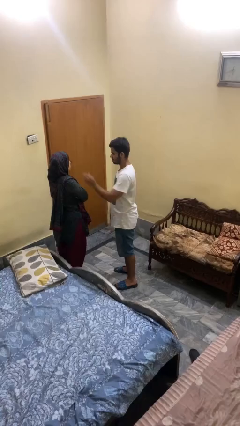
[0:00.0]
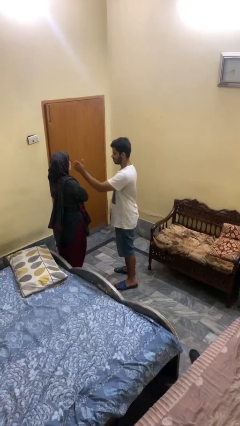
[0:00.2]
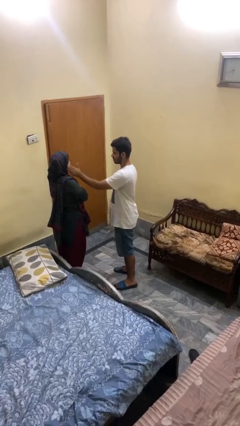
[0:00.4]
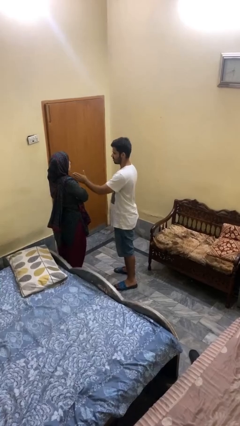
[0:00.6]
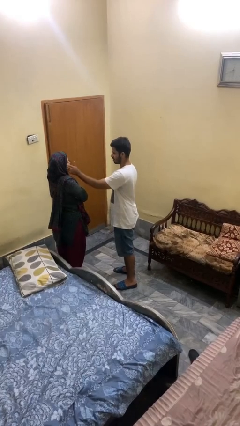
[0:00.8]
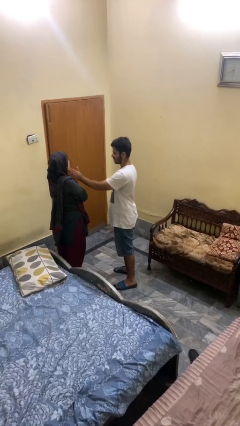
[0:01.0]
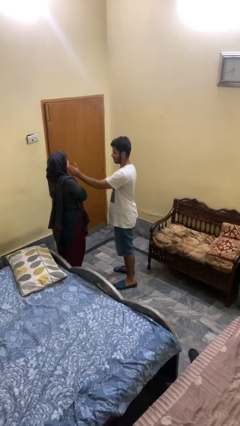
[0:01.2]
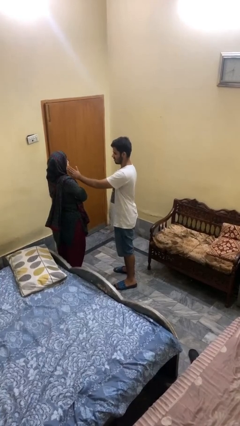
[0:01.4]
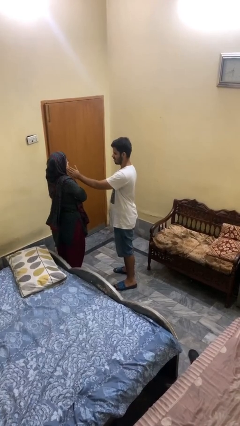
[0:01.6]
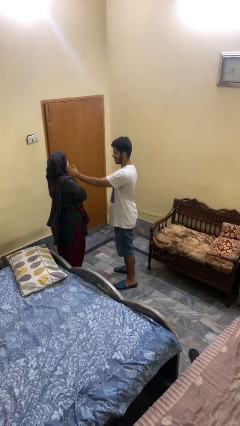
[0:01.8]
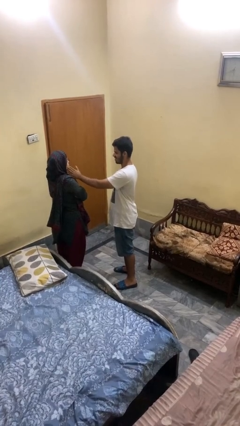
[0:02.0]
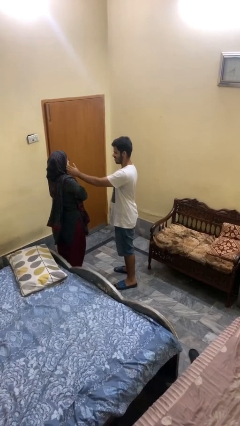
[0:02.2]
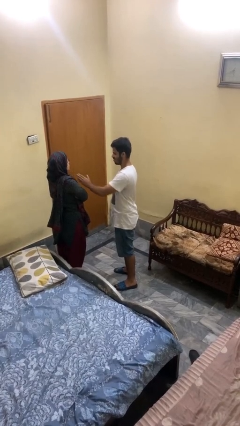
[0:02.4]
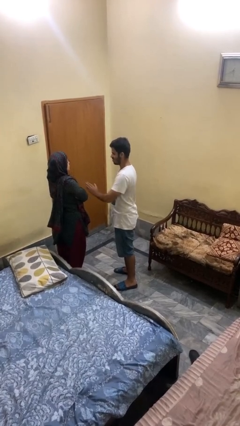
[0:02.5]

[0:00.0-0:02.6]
person touches face of person

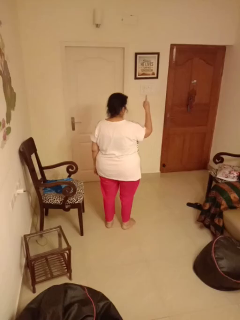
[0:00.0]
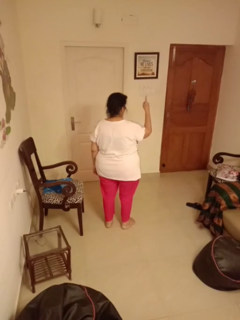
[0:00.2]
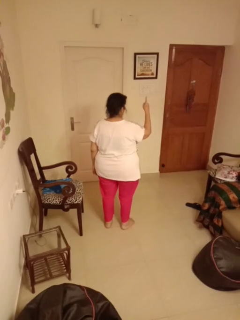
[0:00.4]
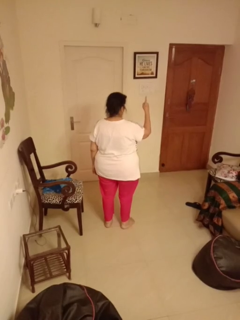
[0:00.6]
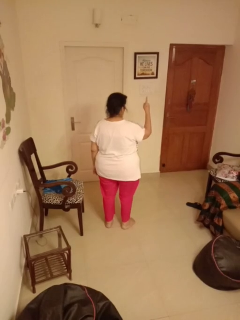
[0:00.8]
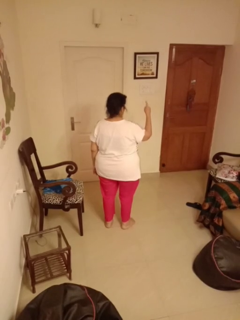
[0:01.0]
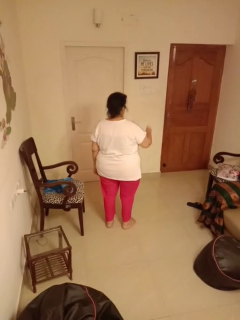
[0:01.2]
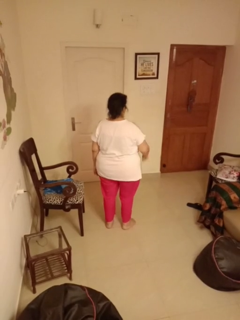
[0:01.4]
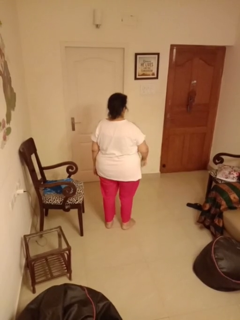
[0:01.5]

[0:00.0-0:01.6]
person gestures number one

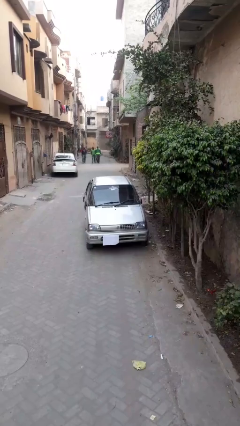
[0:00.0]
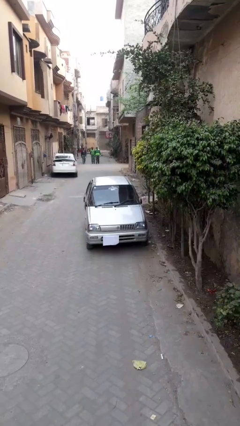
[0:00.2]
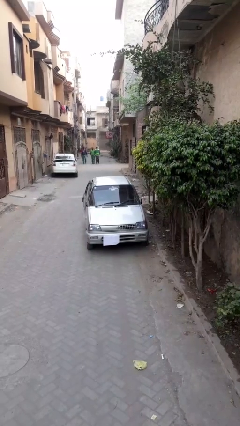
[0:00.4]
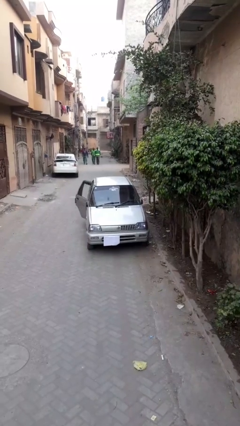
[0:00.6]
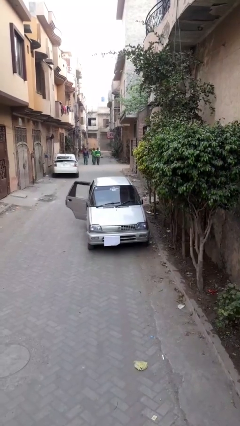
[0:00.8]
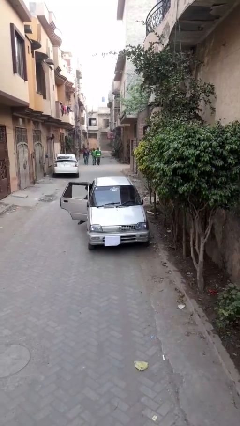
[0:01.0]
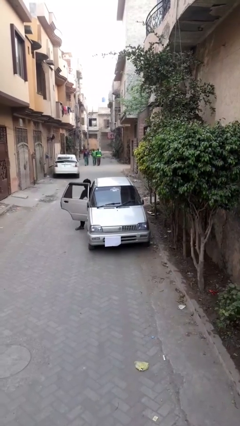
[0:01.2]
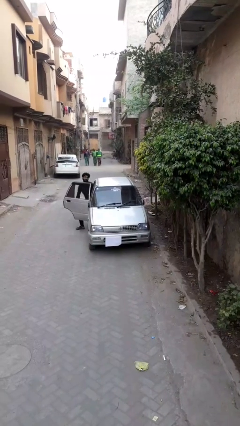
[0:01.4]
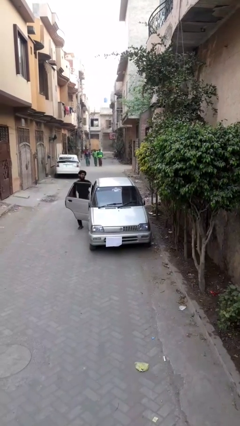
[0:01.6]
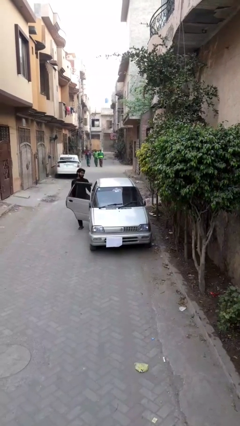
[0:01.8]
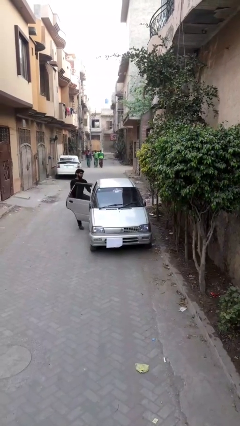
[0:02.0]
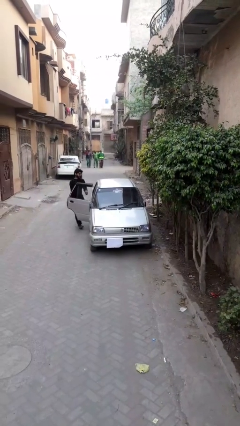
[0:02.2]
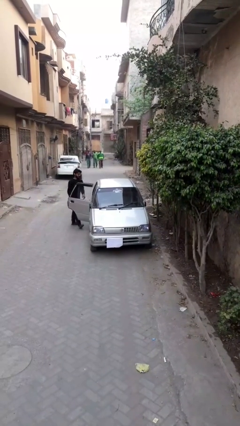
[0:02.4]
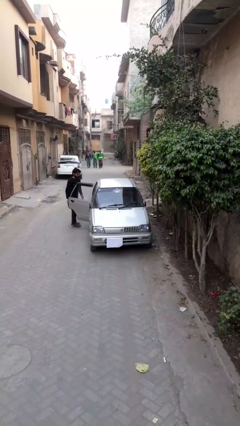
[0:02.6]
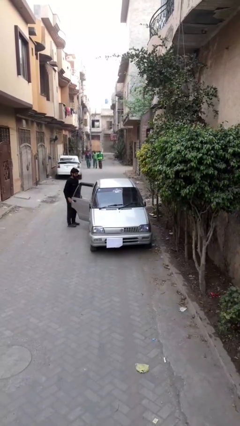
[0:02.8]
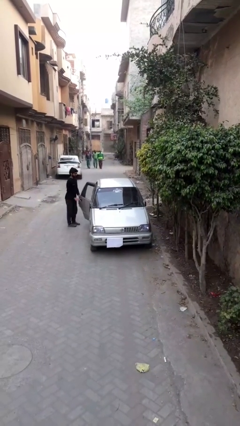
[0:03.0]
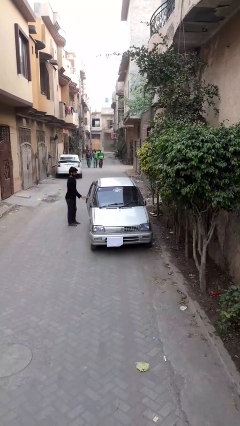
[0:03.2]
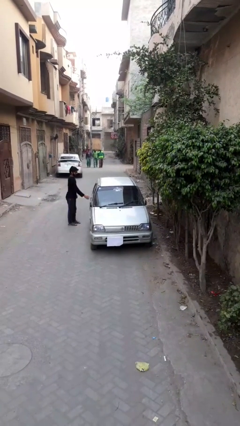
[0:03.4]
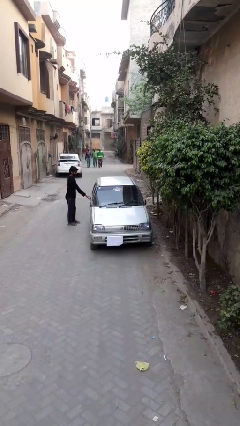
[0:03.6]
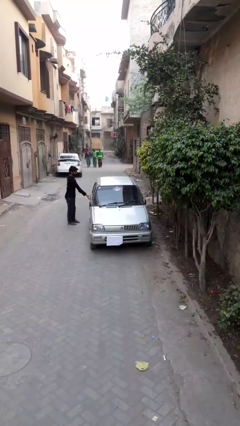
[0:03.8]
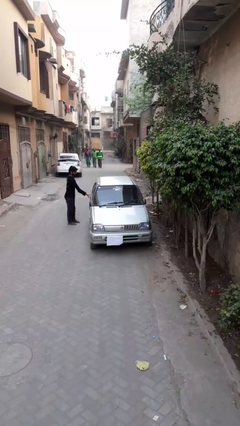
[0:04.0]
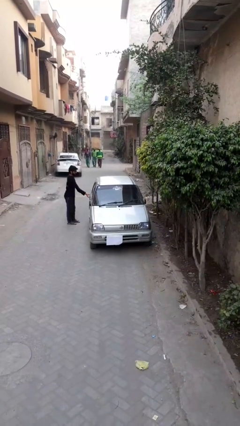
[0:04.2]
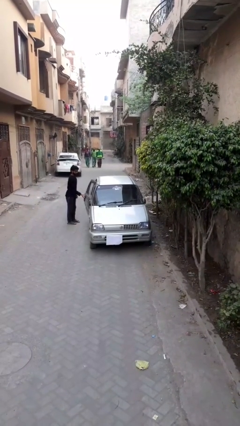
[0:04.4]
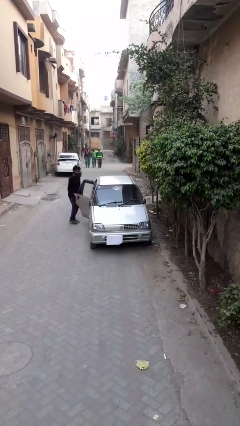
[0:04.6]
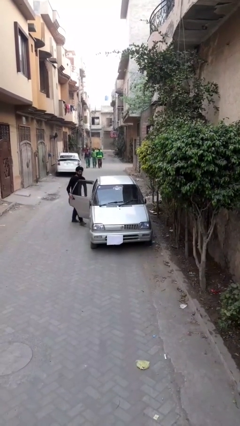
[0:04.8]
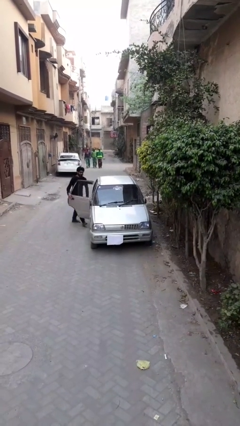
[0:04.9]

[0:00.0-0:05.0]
car drops off person

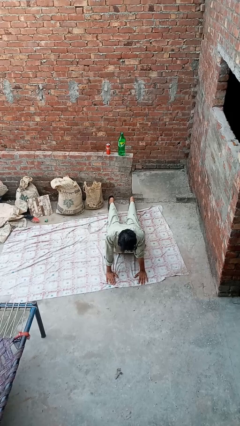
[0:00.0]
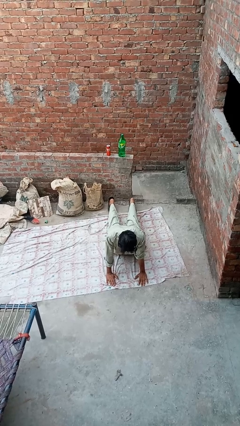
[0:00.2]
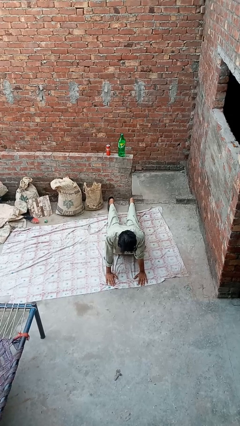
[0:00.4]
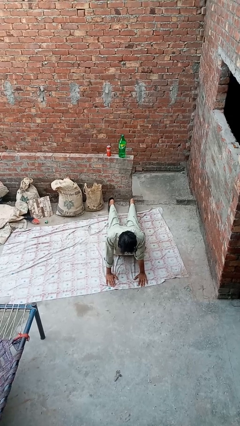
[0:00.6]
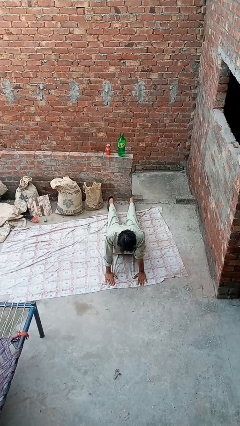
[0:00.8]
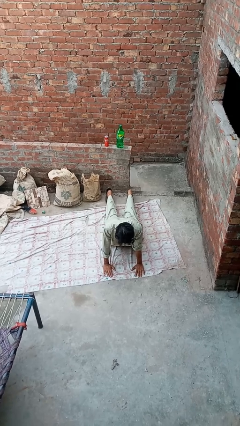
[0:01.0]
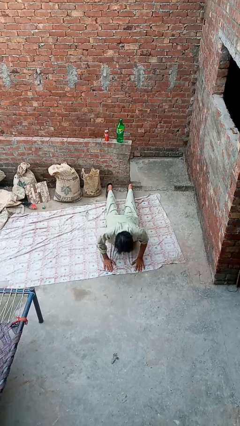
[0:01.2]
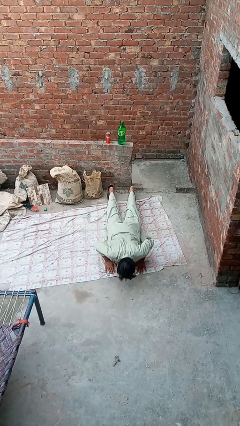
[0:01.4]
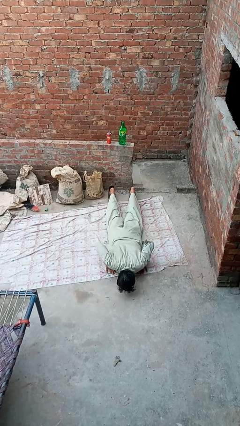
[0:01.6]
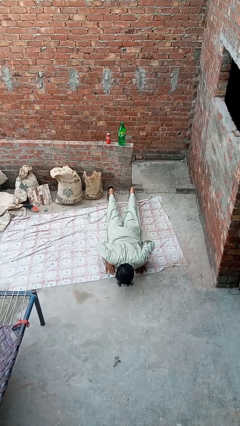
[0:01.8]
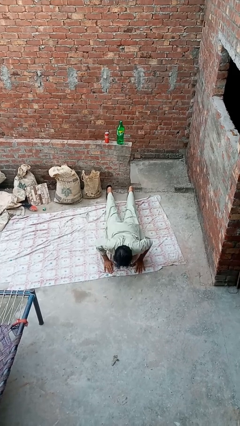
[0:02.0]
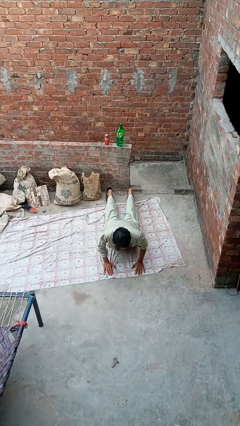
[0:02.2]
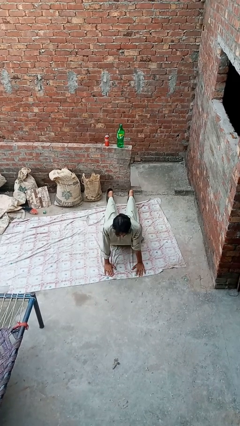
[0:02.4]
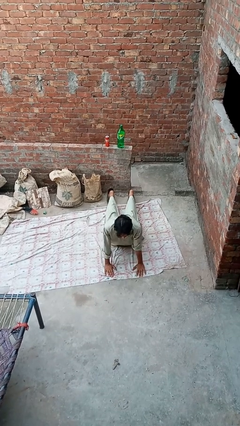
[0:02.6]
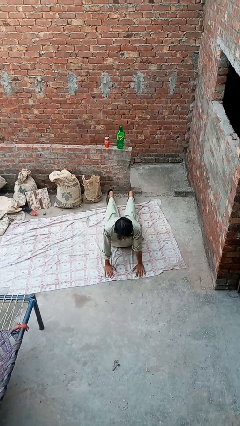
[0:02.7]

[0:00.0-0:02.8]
person exercises with pushup

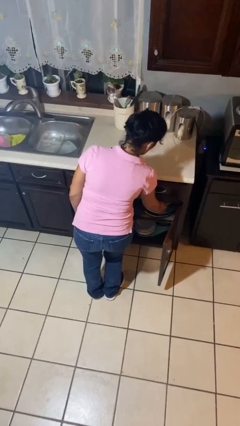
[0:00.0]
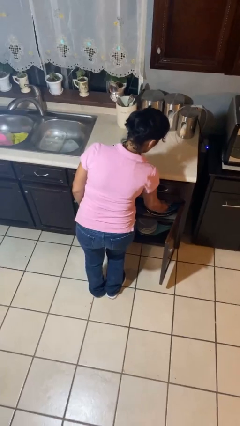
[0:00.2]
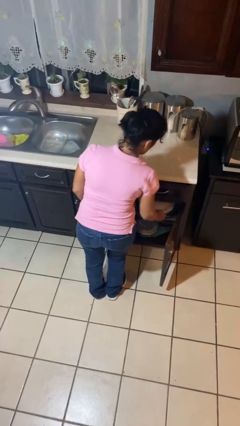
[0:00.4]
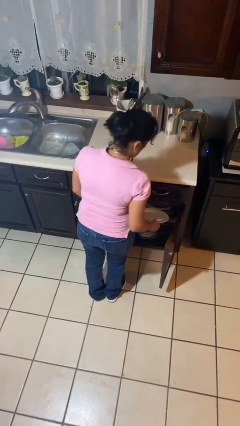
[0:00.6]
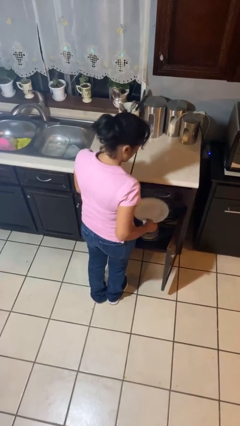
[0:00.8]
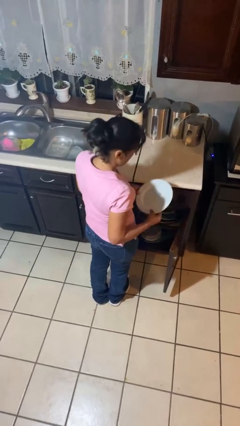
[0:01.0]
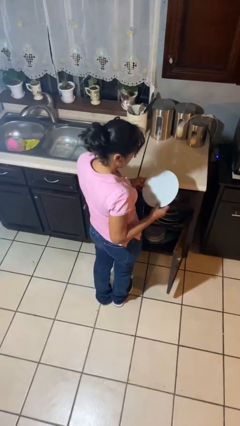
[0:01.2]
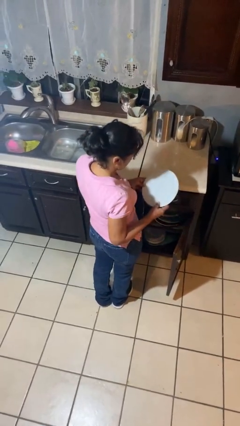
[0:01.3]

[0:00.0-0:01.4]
person puts object in cabinet

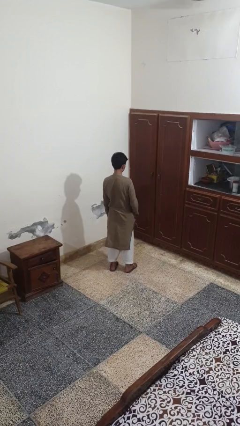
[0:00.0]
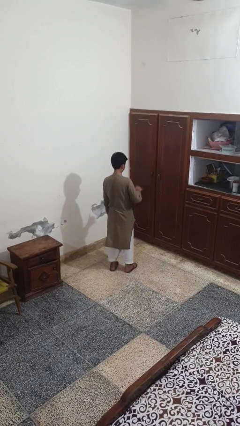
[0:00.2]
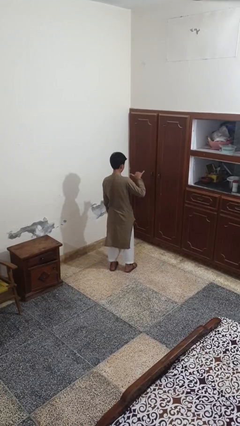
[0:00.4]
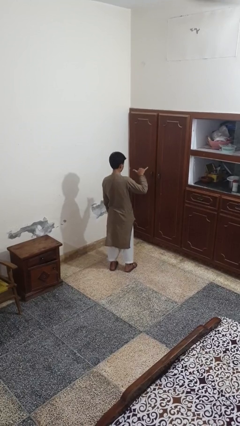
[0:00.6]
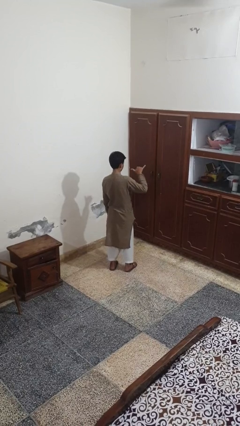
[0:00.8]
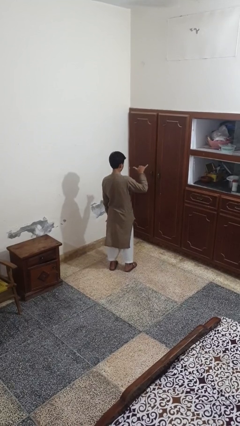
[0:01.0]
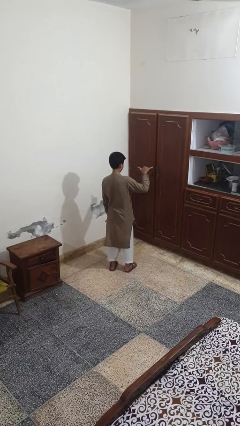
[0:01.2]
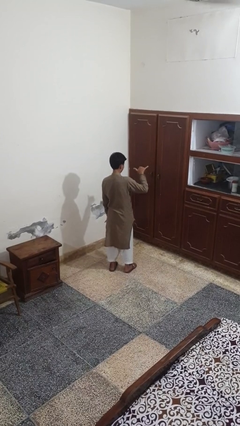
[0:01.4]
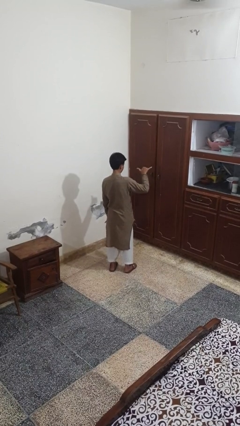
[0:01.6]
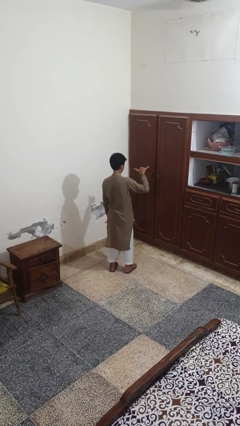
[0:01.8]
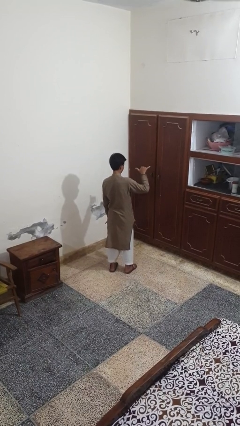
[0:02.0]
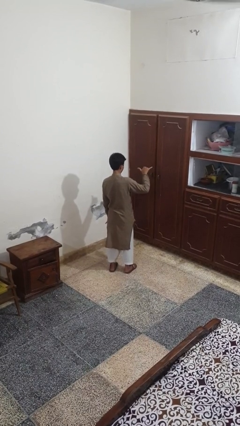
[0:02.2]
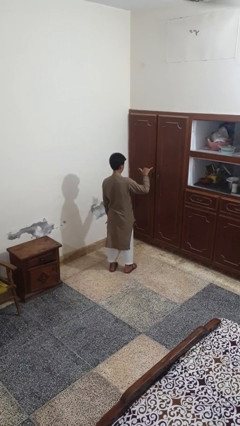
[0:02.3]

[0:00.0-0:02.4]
person gestures hang loose

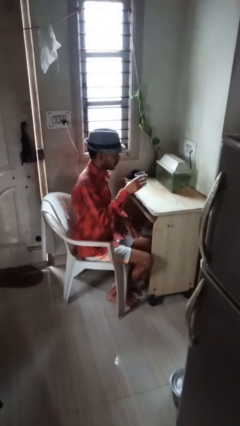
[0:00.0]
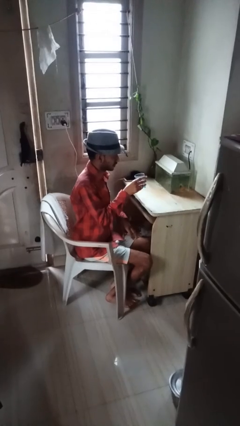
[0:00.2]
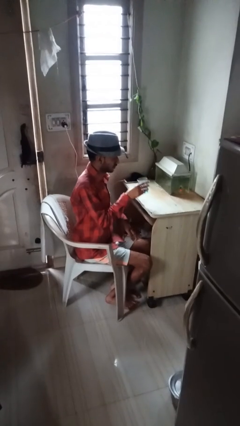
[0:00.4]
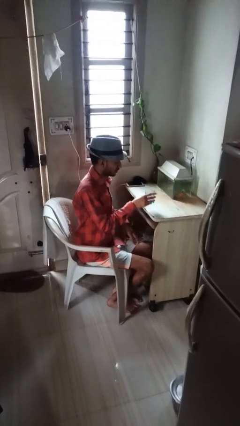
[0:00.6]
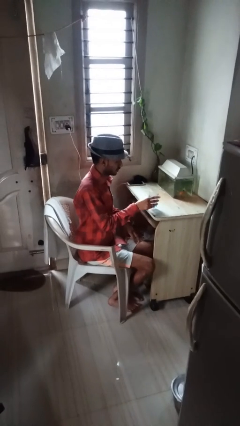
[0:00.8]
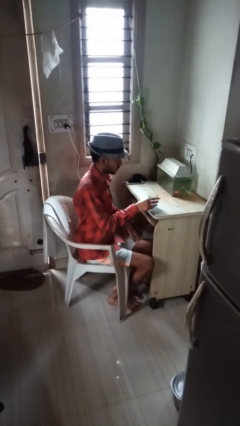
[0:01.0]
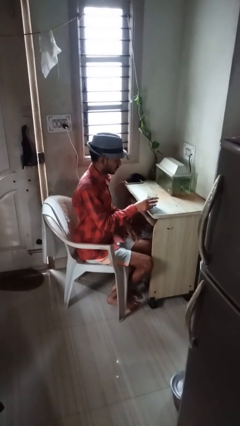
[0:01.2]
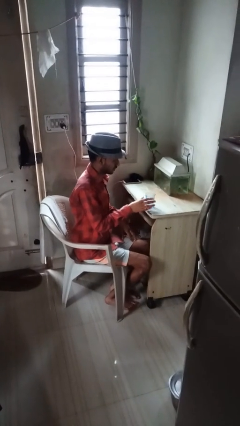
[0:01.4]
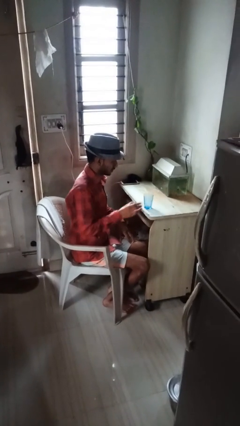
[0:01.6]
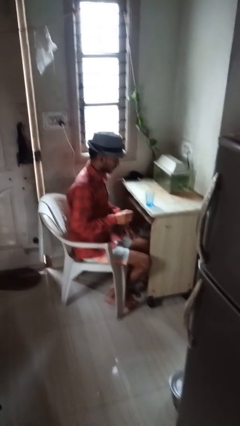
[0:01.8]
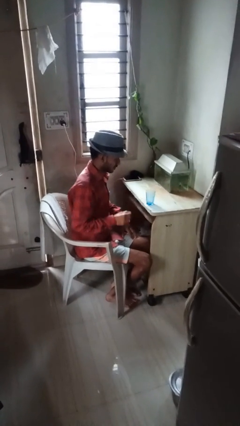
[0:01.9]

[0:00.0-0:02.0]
person puts down object on table
